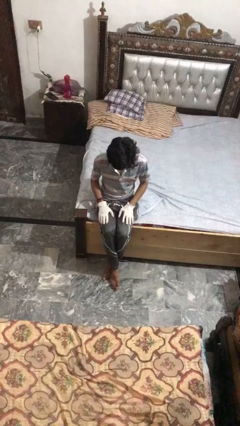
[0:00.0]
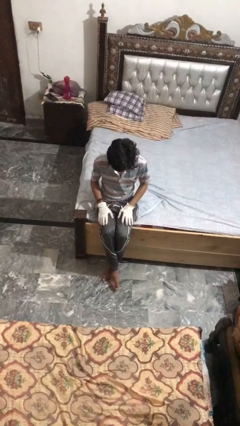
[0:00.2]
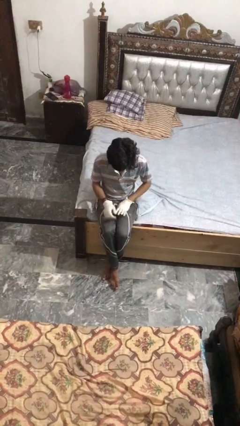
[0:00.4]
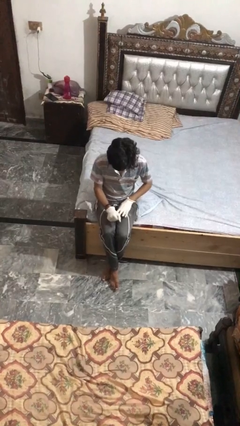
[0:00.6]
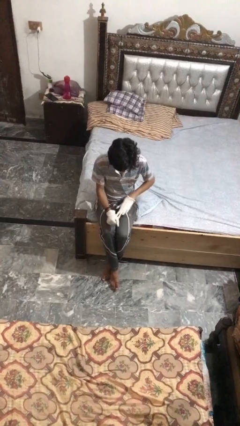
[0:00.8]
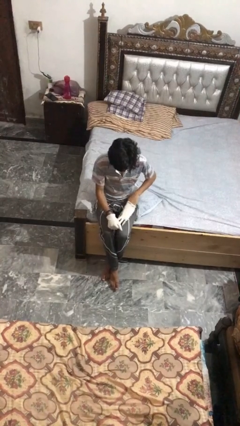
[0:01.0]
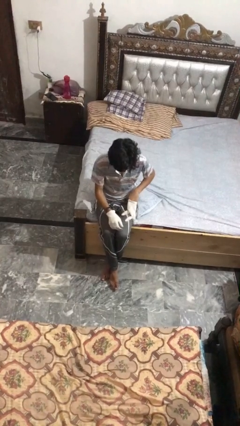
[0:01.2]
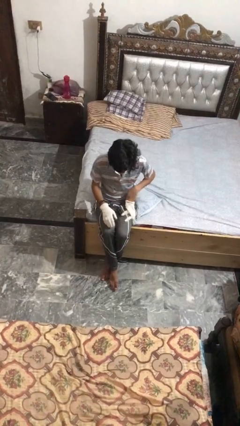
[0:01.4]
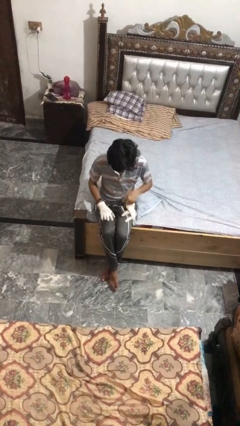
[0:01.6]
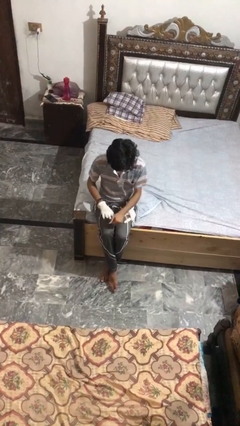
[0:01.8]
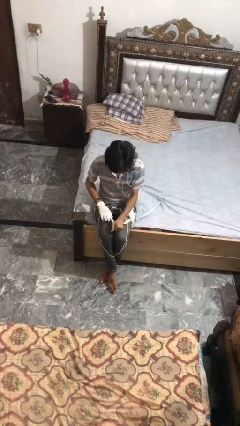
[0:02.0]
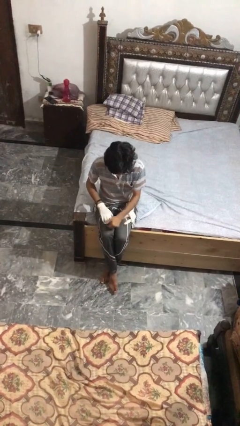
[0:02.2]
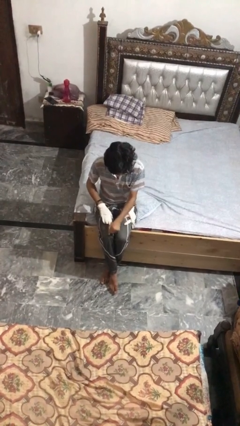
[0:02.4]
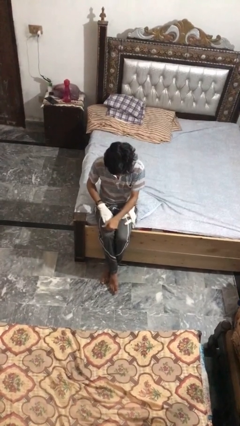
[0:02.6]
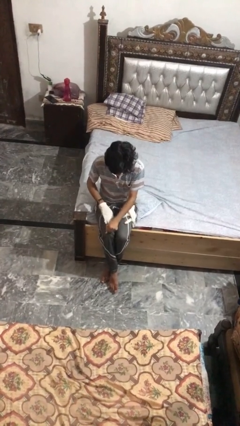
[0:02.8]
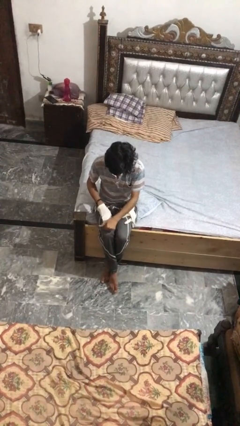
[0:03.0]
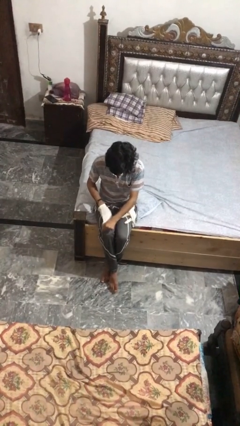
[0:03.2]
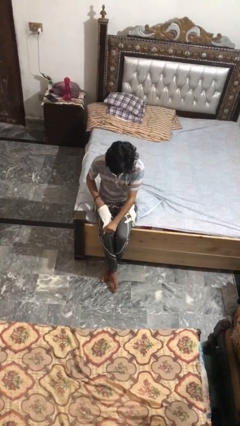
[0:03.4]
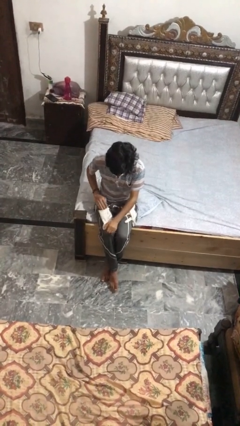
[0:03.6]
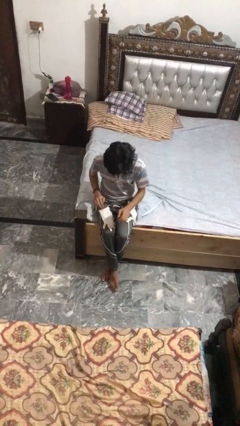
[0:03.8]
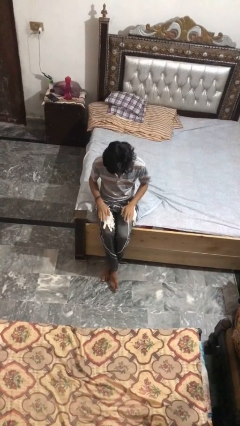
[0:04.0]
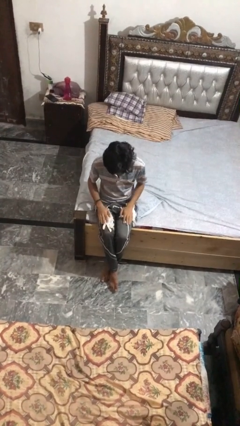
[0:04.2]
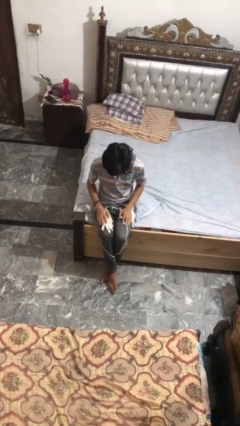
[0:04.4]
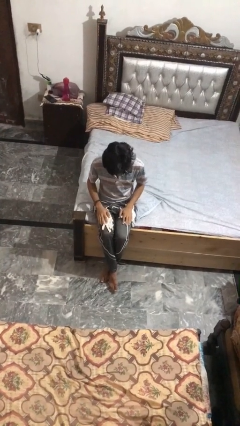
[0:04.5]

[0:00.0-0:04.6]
person takes off gloves

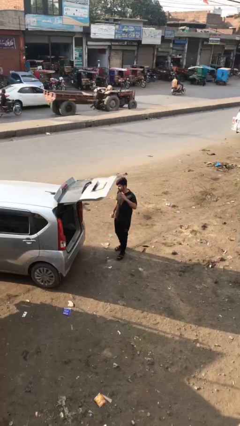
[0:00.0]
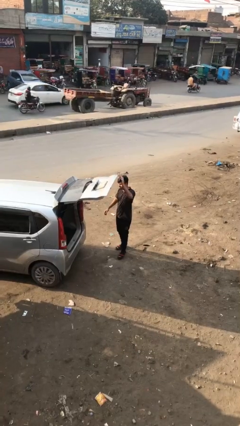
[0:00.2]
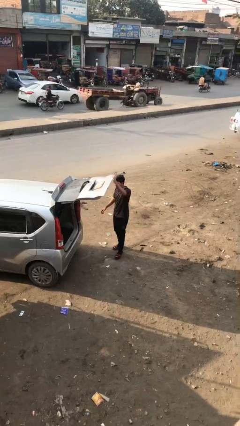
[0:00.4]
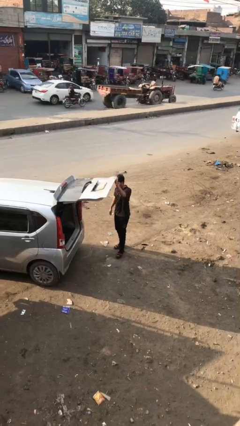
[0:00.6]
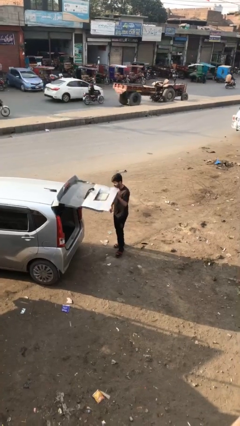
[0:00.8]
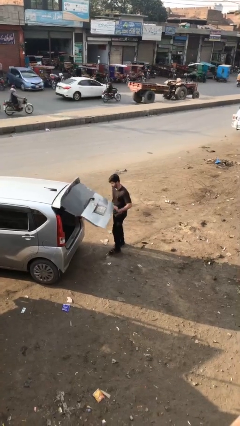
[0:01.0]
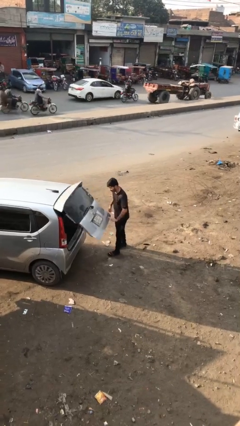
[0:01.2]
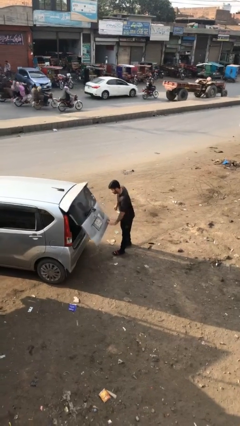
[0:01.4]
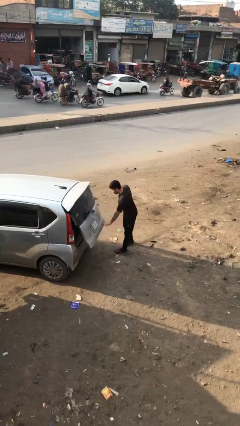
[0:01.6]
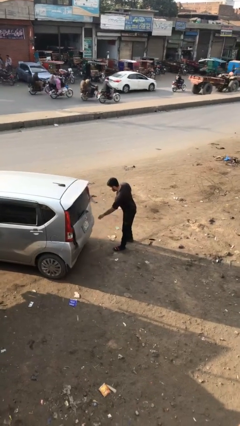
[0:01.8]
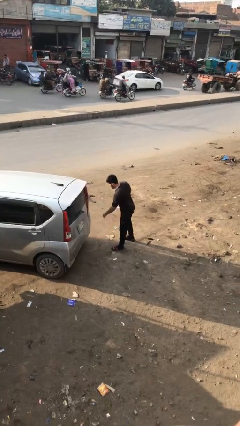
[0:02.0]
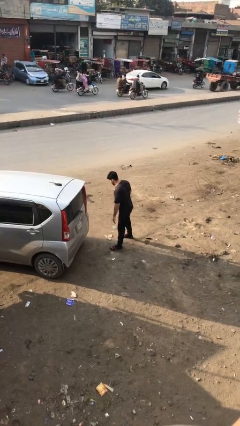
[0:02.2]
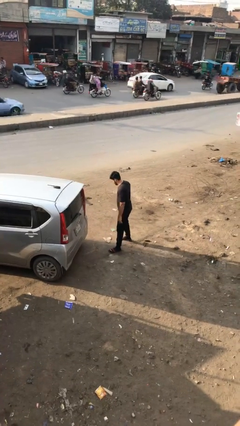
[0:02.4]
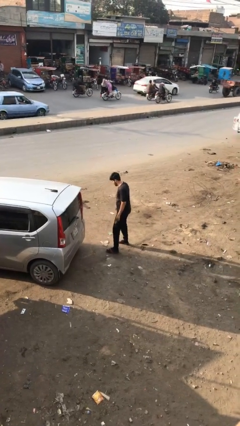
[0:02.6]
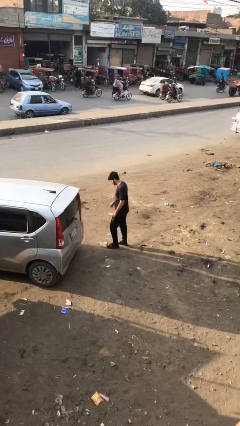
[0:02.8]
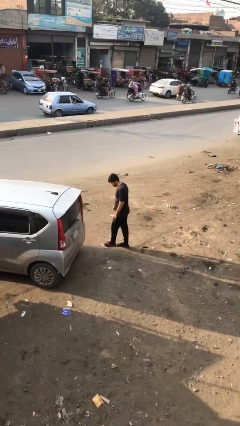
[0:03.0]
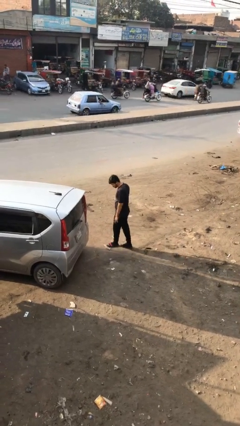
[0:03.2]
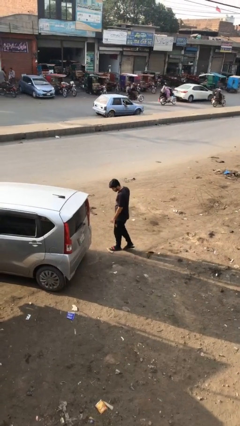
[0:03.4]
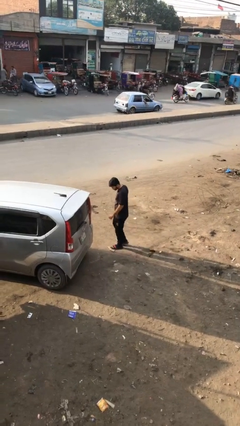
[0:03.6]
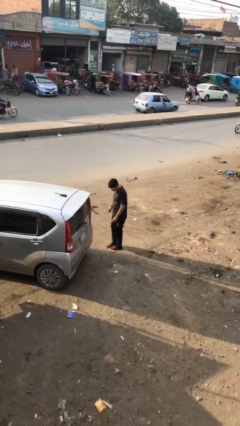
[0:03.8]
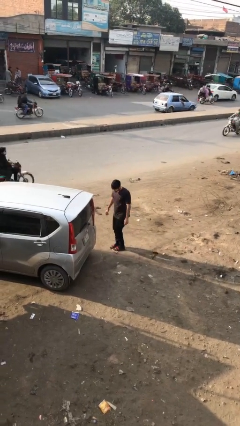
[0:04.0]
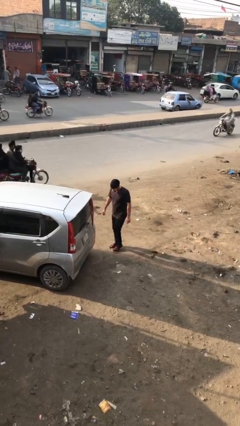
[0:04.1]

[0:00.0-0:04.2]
person closes car trunk

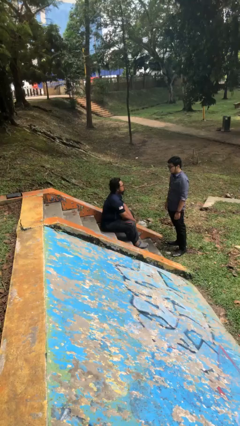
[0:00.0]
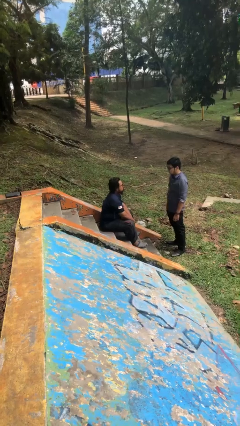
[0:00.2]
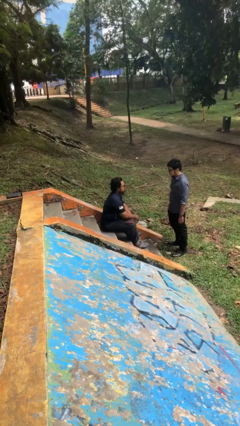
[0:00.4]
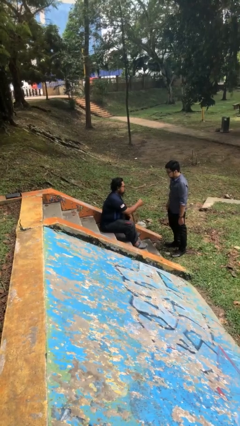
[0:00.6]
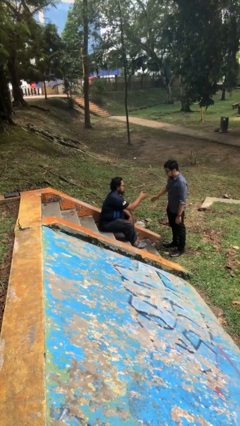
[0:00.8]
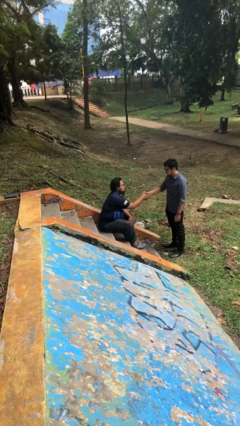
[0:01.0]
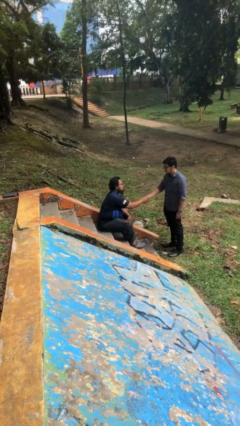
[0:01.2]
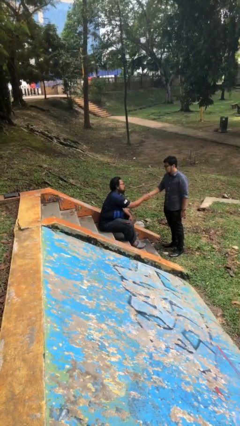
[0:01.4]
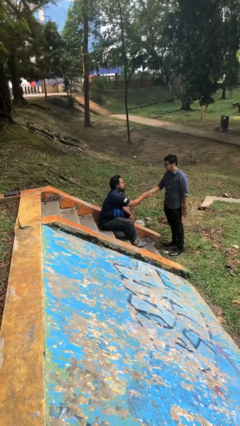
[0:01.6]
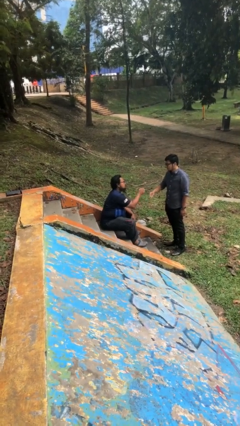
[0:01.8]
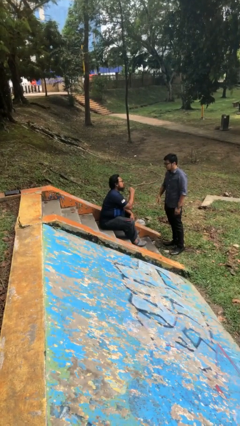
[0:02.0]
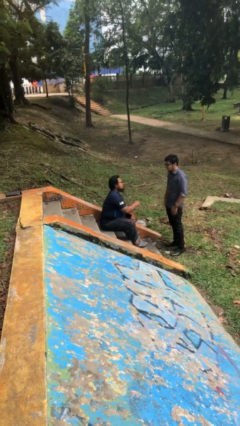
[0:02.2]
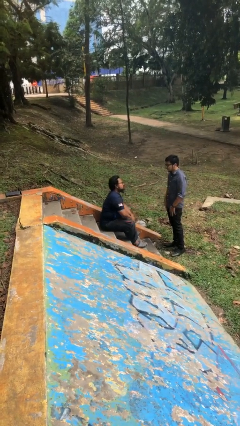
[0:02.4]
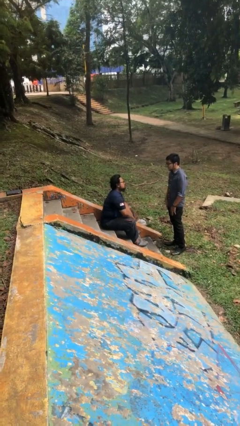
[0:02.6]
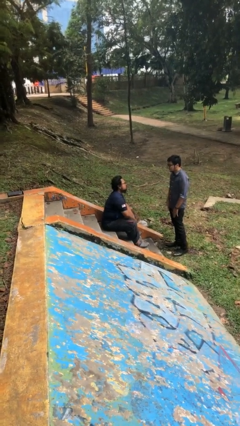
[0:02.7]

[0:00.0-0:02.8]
person shakes hand

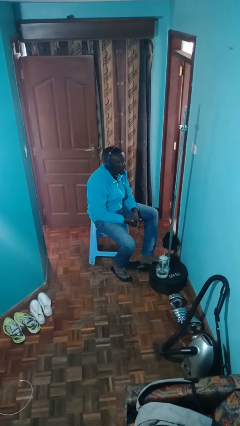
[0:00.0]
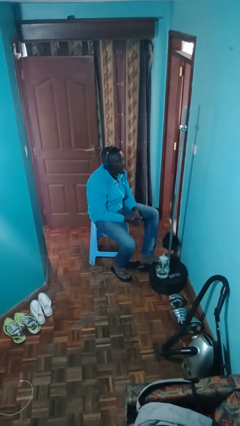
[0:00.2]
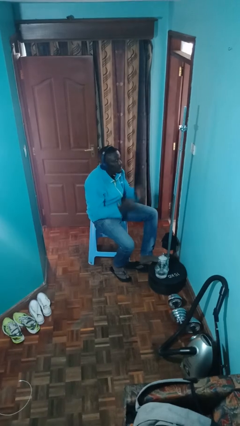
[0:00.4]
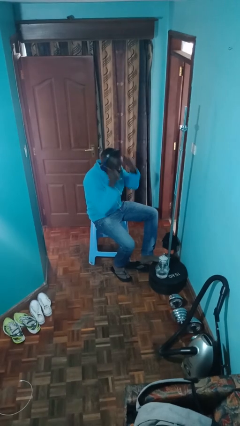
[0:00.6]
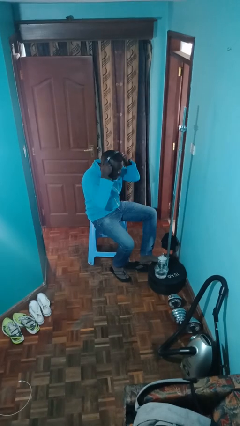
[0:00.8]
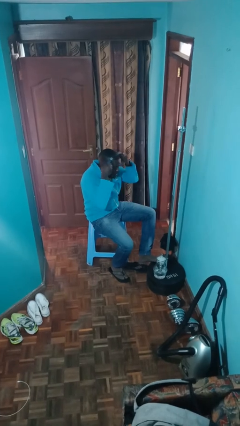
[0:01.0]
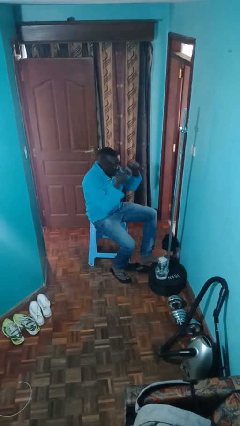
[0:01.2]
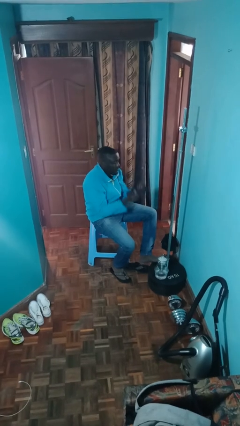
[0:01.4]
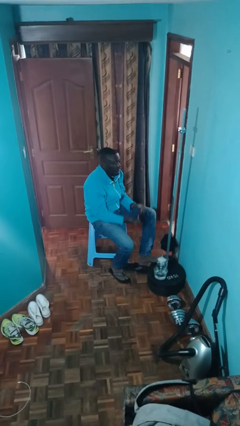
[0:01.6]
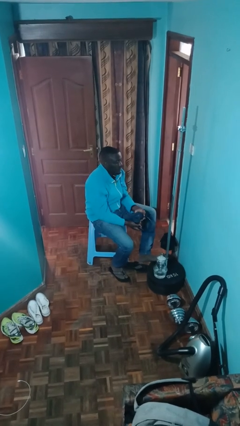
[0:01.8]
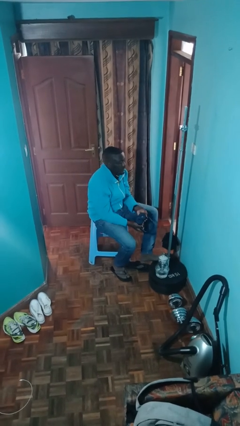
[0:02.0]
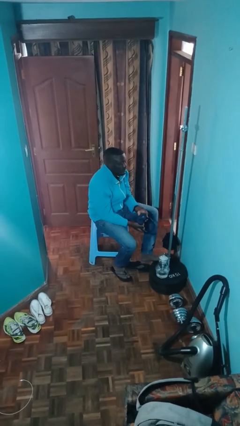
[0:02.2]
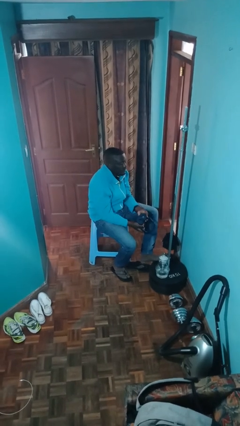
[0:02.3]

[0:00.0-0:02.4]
person takes off headphones

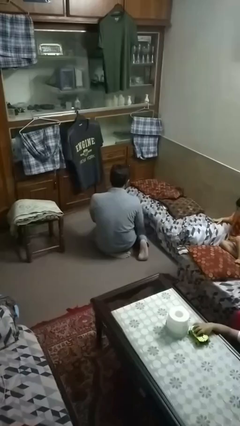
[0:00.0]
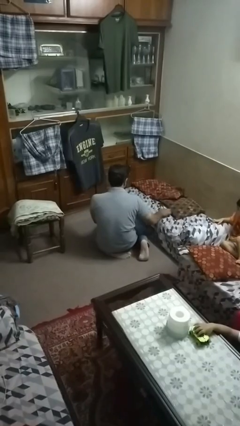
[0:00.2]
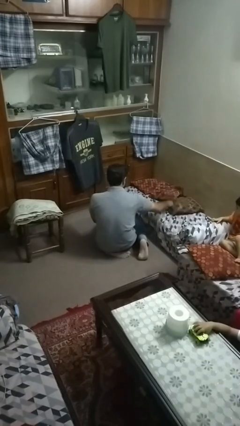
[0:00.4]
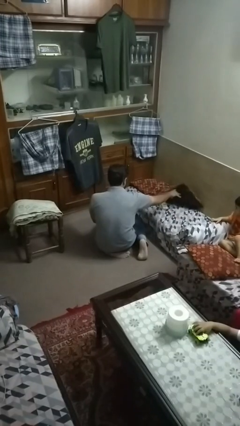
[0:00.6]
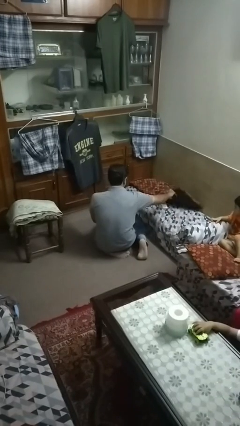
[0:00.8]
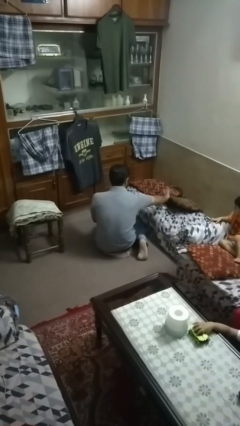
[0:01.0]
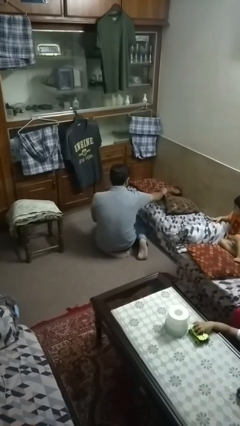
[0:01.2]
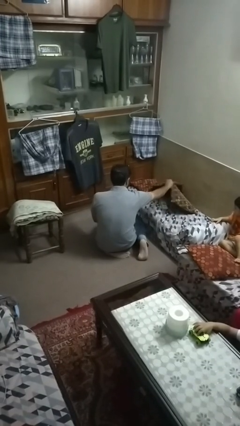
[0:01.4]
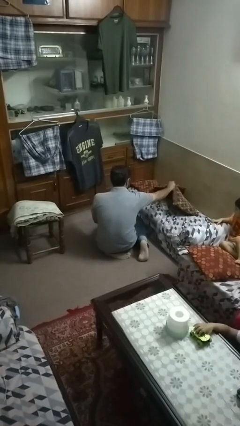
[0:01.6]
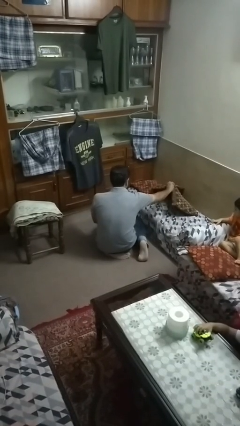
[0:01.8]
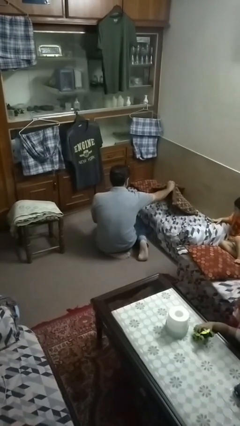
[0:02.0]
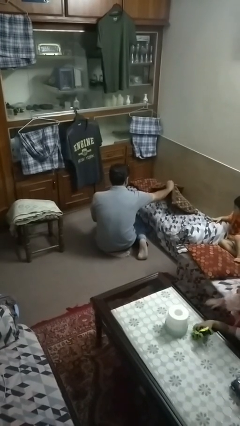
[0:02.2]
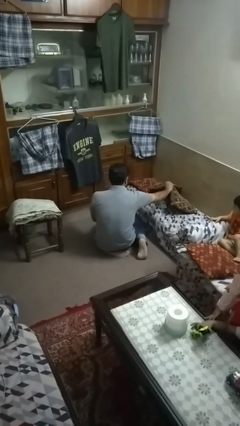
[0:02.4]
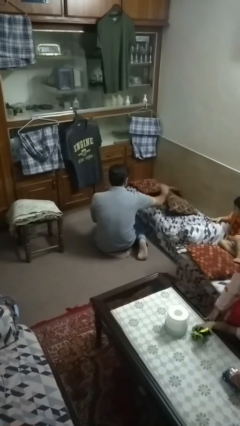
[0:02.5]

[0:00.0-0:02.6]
person searches in couch

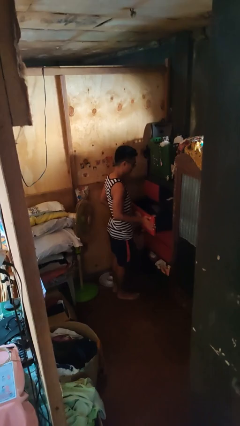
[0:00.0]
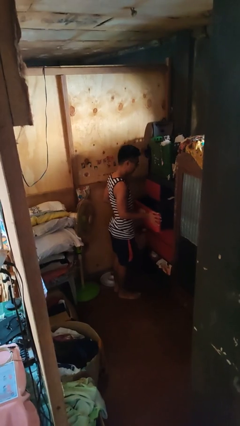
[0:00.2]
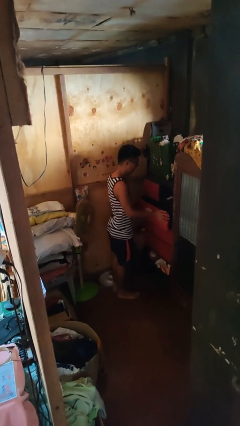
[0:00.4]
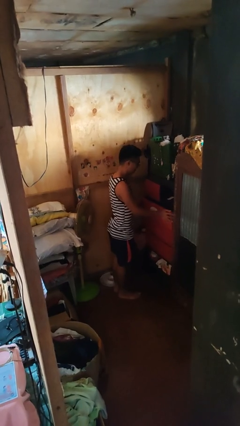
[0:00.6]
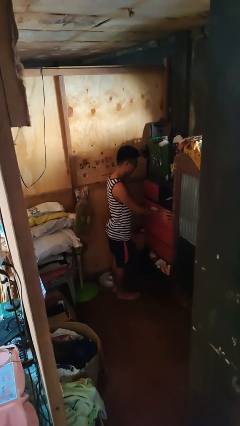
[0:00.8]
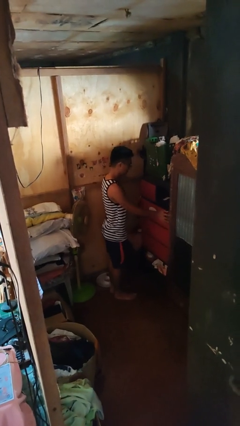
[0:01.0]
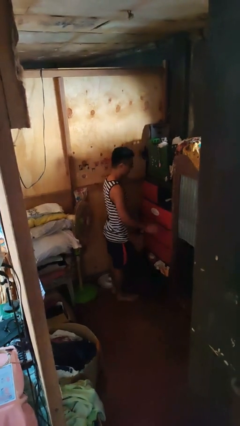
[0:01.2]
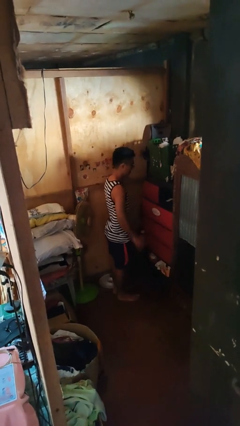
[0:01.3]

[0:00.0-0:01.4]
person closes dresser drawer
